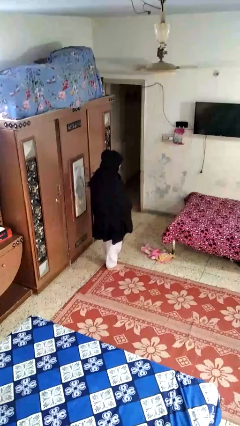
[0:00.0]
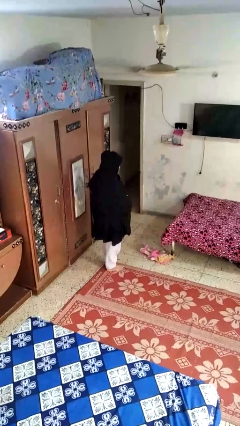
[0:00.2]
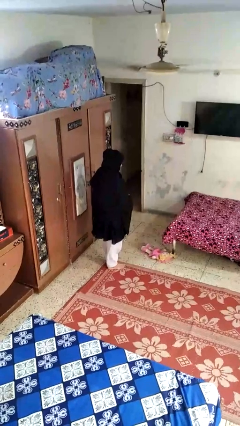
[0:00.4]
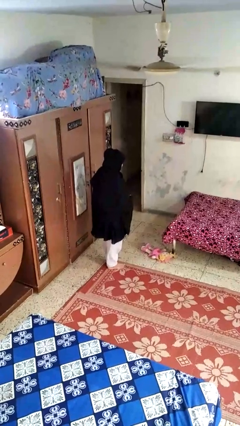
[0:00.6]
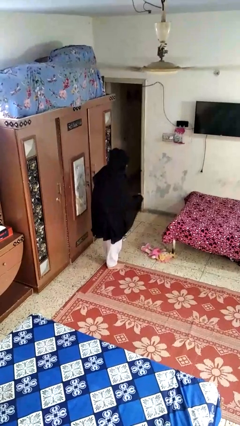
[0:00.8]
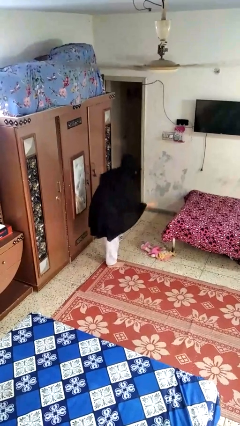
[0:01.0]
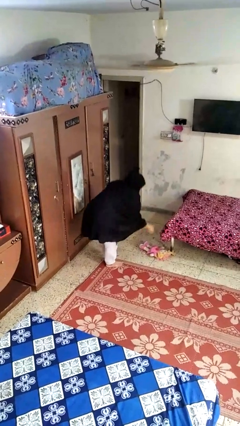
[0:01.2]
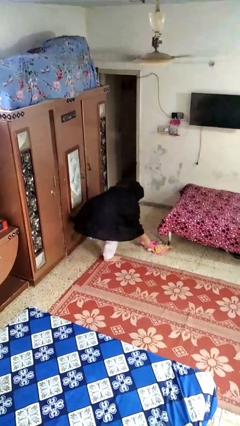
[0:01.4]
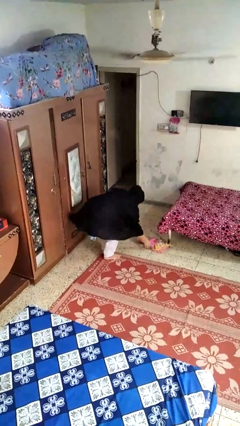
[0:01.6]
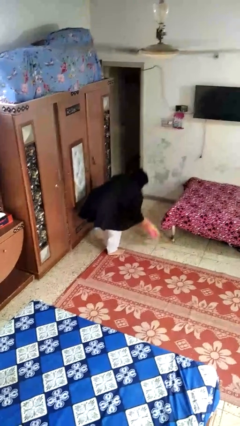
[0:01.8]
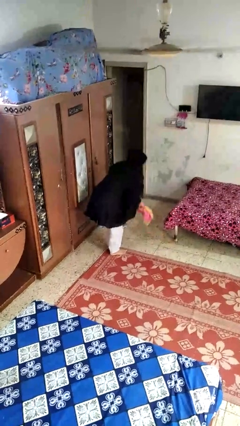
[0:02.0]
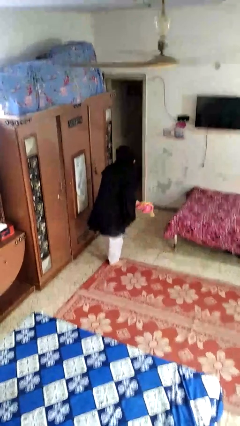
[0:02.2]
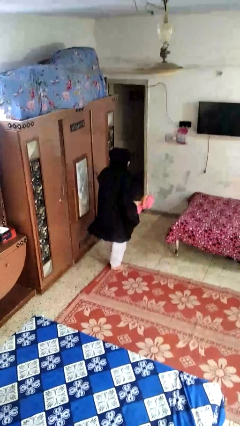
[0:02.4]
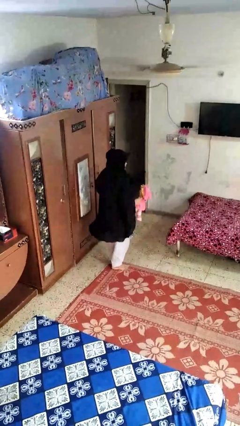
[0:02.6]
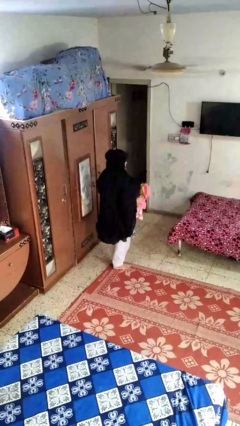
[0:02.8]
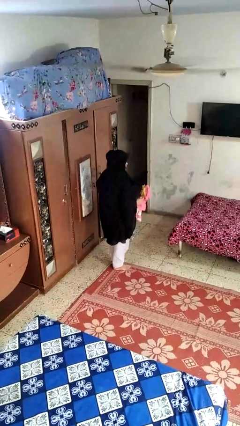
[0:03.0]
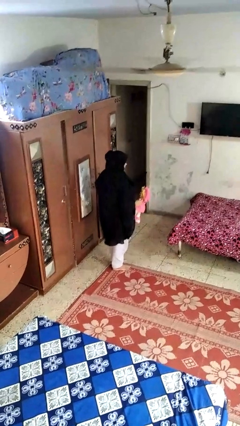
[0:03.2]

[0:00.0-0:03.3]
person picks up object from floor

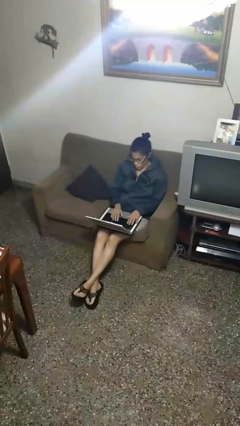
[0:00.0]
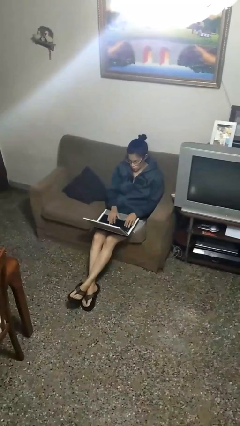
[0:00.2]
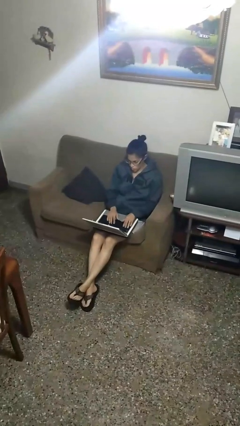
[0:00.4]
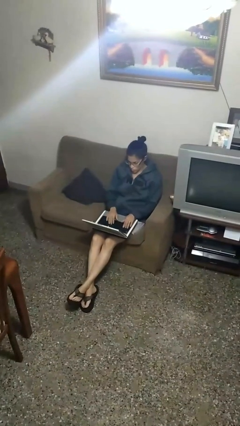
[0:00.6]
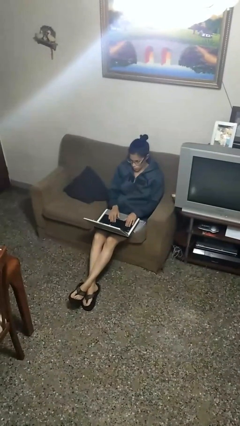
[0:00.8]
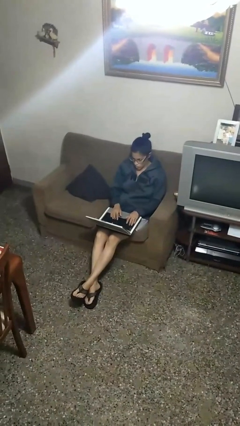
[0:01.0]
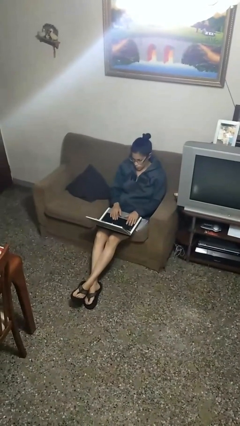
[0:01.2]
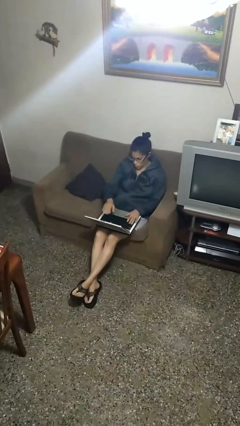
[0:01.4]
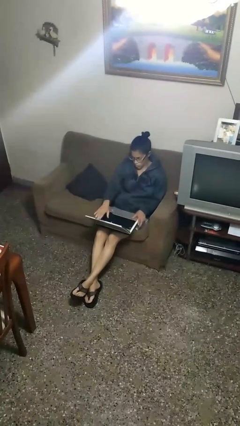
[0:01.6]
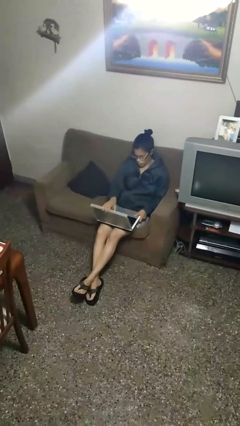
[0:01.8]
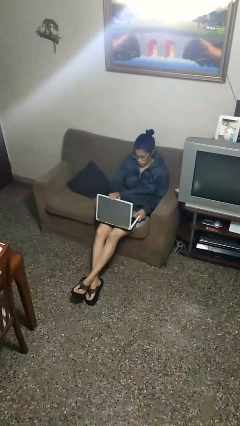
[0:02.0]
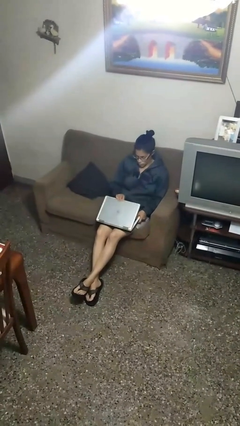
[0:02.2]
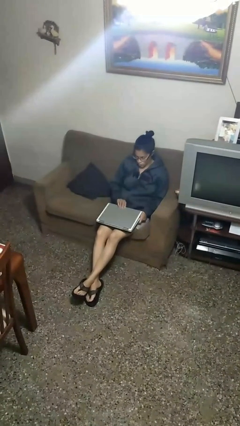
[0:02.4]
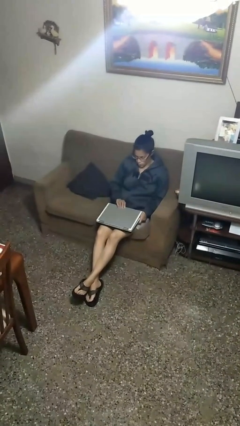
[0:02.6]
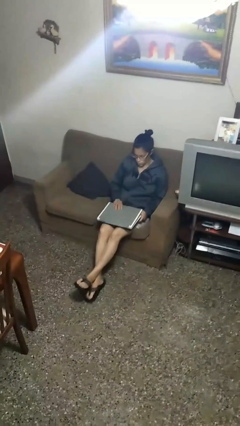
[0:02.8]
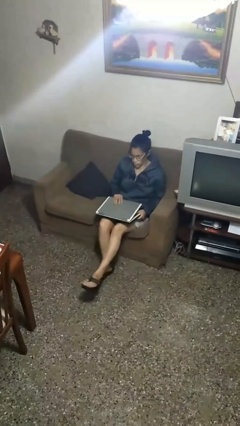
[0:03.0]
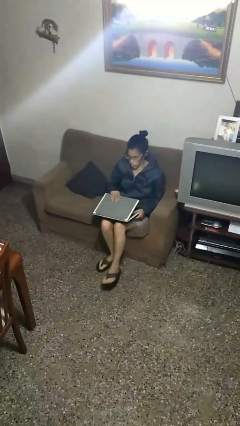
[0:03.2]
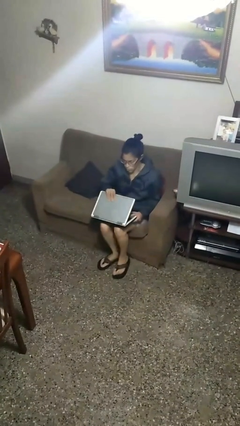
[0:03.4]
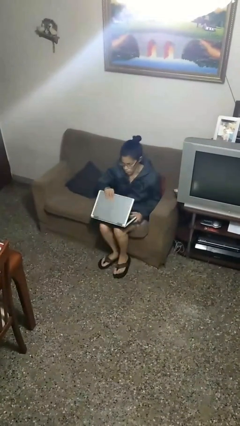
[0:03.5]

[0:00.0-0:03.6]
person interacts with laptop

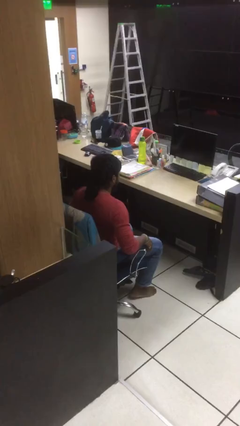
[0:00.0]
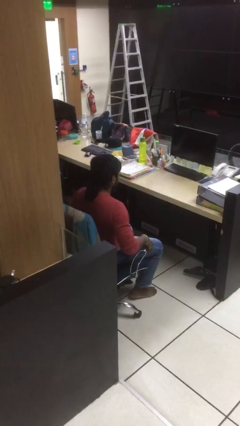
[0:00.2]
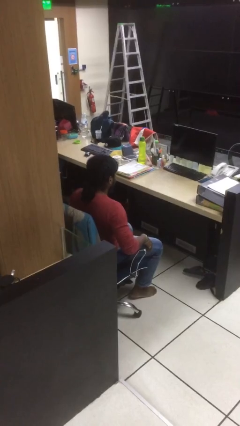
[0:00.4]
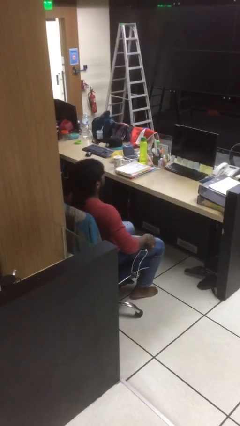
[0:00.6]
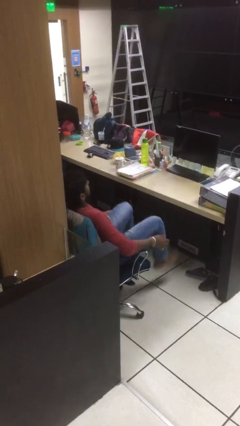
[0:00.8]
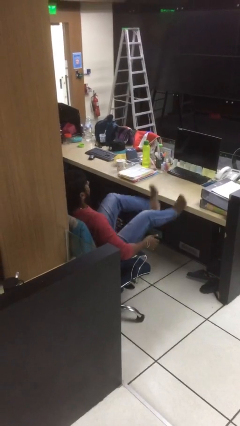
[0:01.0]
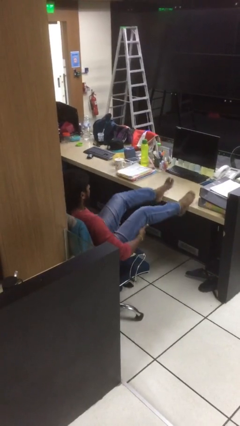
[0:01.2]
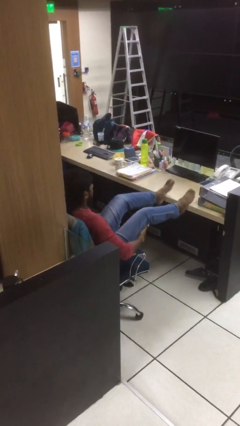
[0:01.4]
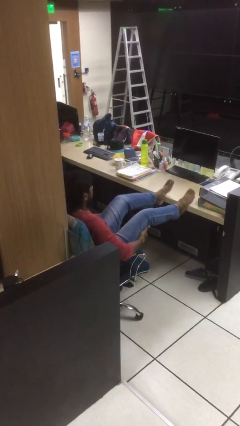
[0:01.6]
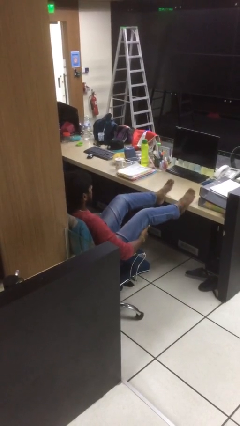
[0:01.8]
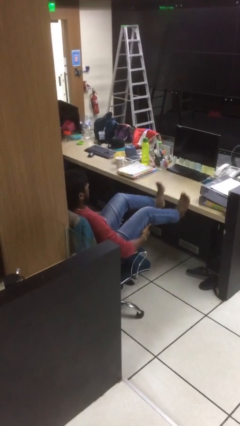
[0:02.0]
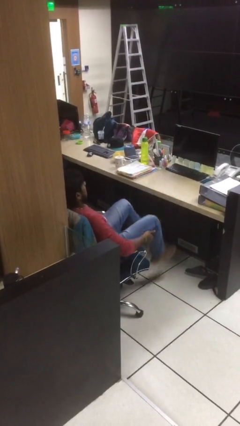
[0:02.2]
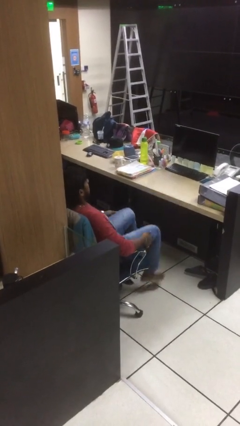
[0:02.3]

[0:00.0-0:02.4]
person puts feet up

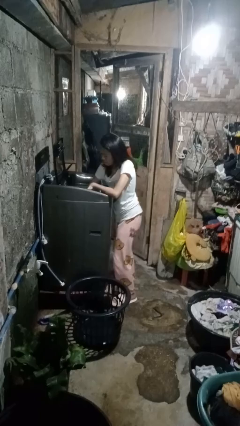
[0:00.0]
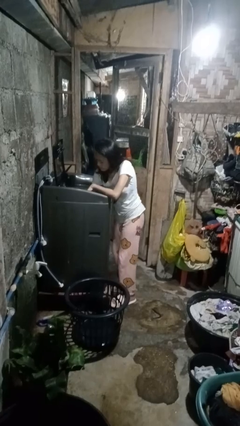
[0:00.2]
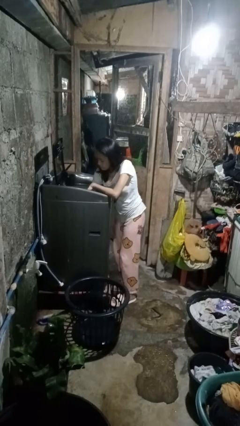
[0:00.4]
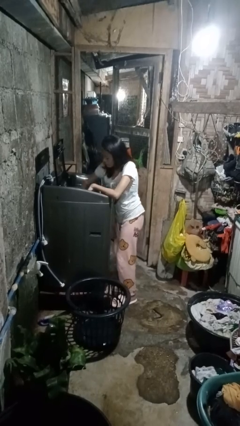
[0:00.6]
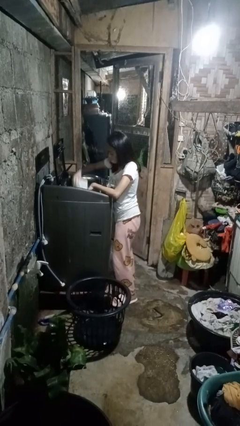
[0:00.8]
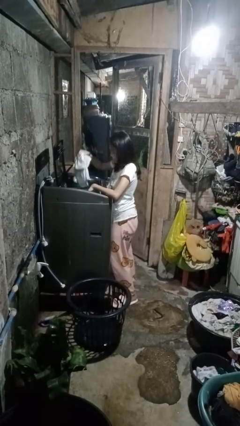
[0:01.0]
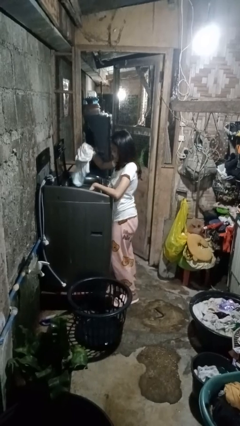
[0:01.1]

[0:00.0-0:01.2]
person unloads clotheswasher

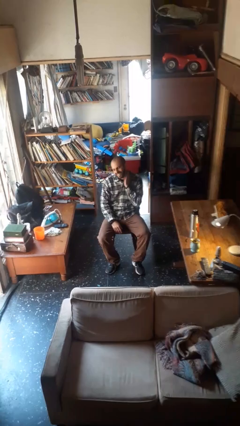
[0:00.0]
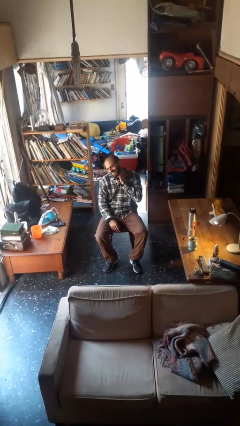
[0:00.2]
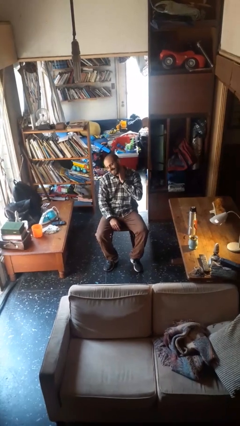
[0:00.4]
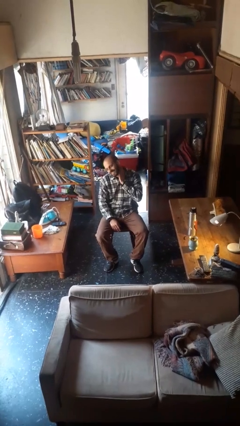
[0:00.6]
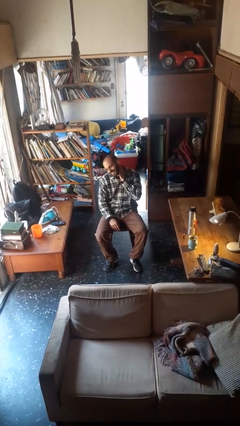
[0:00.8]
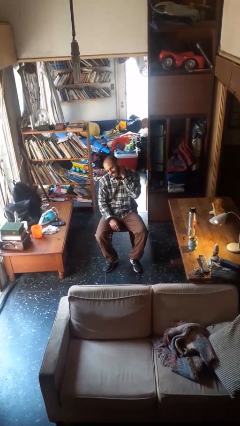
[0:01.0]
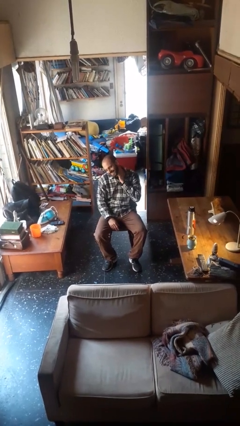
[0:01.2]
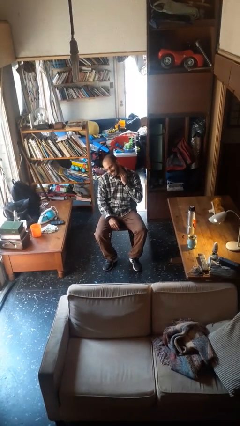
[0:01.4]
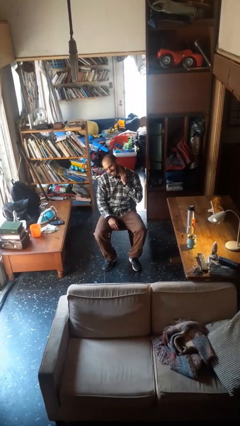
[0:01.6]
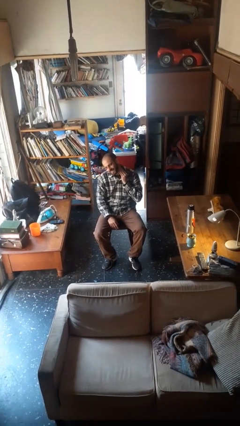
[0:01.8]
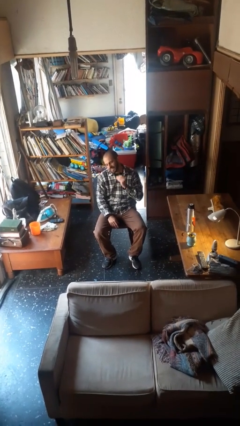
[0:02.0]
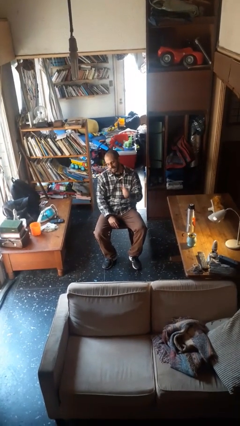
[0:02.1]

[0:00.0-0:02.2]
person swats bug

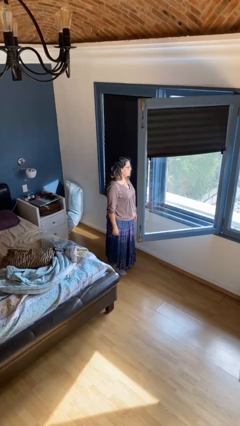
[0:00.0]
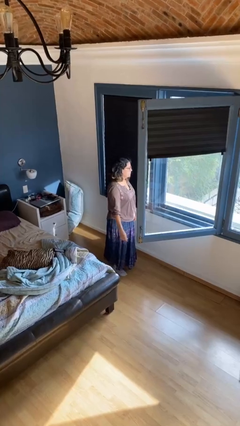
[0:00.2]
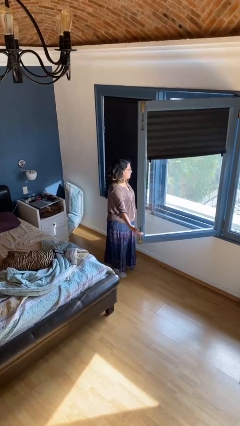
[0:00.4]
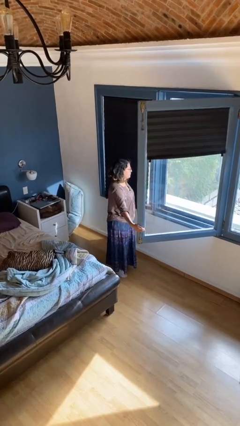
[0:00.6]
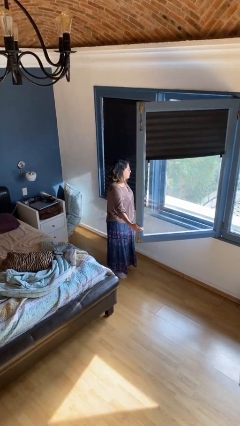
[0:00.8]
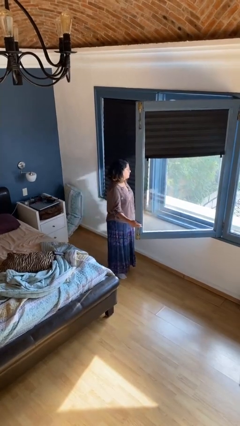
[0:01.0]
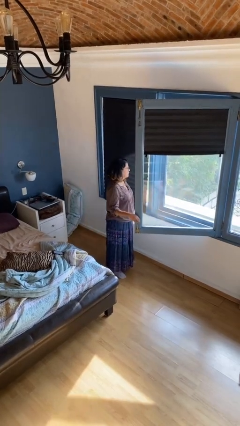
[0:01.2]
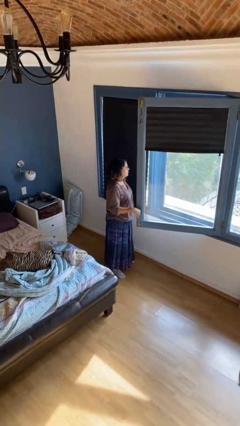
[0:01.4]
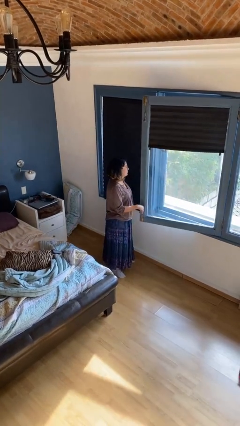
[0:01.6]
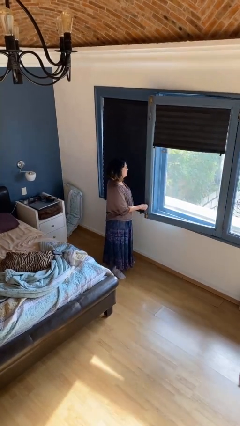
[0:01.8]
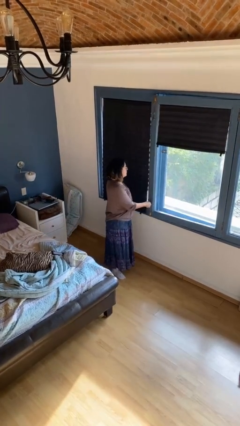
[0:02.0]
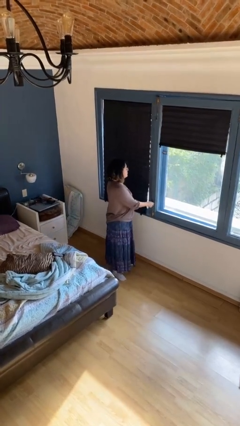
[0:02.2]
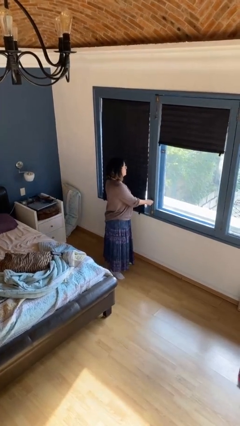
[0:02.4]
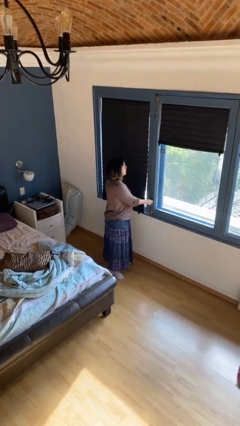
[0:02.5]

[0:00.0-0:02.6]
person closes home window

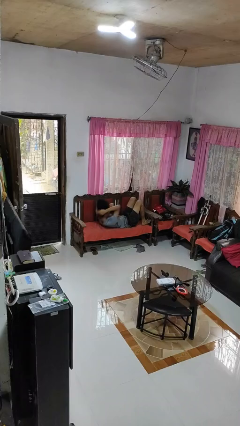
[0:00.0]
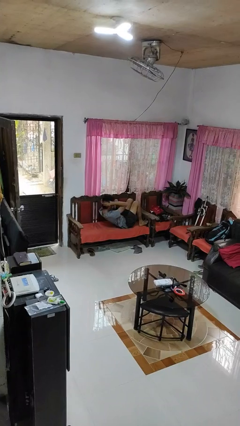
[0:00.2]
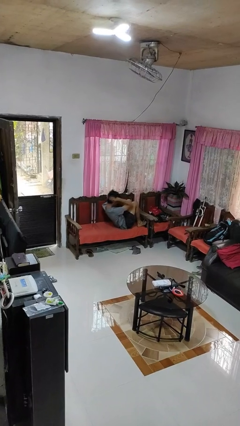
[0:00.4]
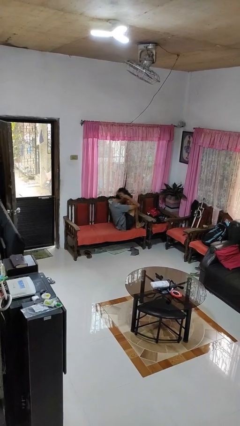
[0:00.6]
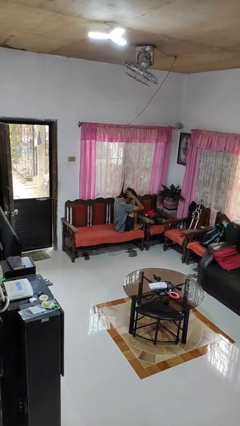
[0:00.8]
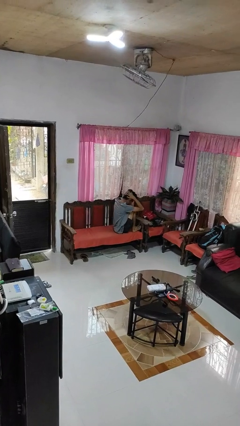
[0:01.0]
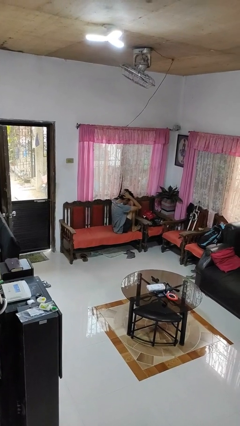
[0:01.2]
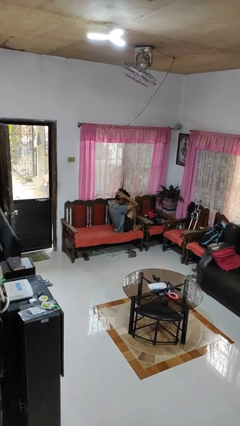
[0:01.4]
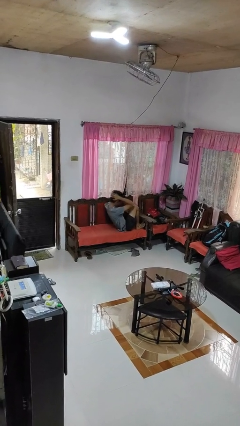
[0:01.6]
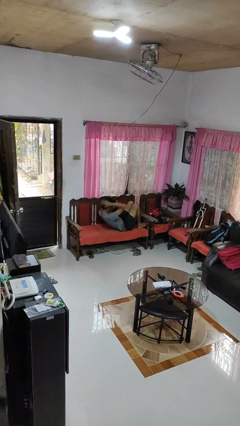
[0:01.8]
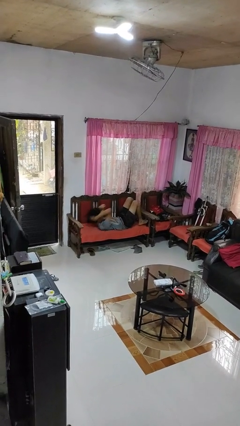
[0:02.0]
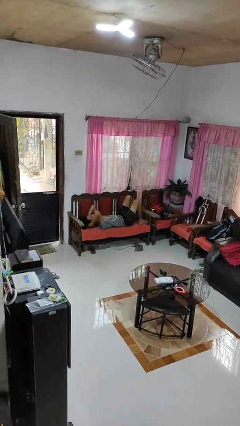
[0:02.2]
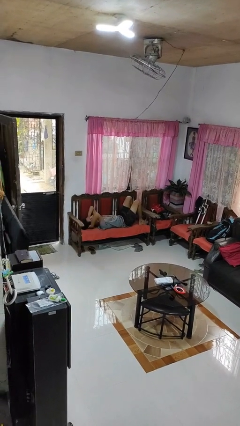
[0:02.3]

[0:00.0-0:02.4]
person exercises with situp
